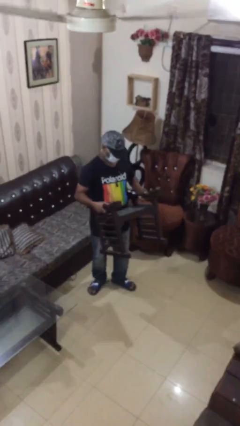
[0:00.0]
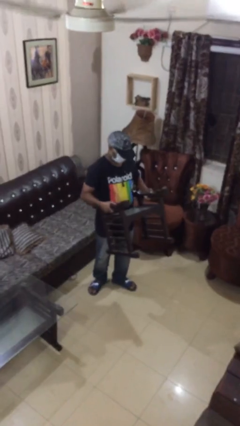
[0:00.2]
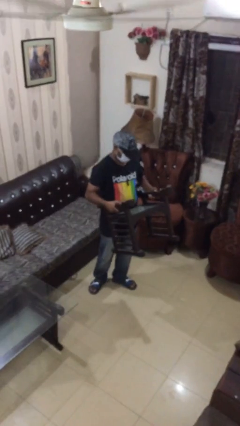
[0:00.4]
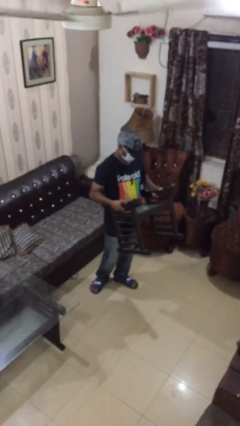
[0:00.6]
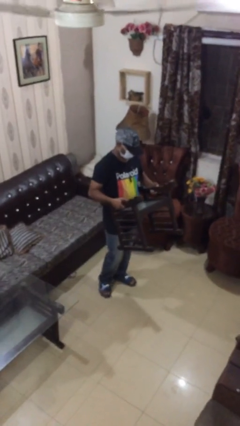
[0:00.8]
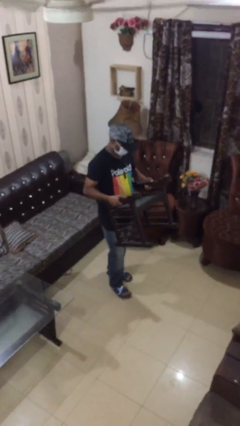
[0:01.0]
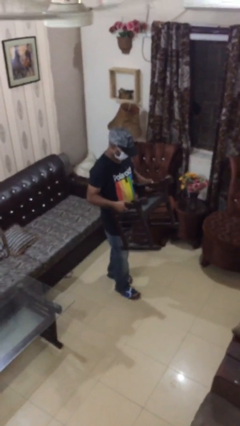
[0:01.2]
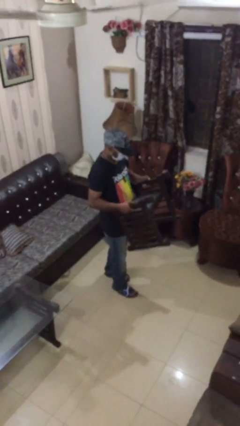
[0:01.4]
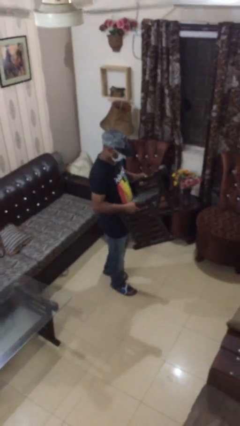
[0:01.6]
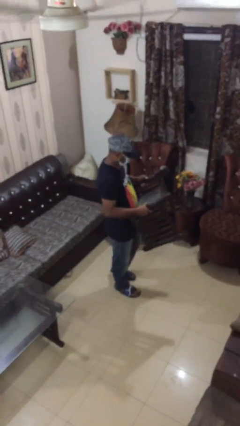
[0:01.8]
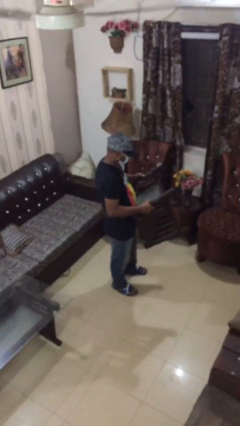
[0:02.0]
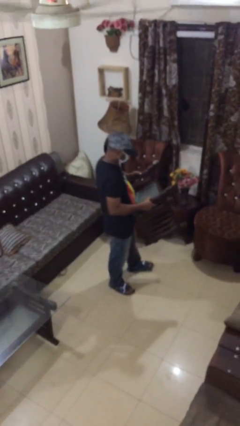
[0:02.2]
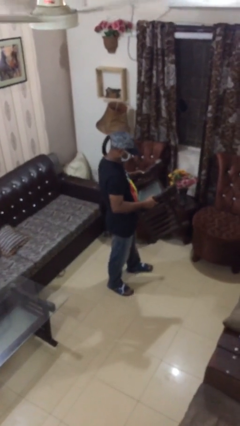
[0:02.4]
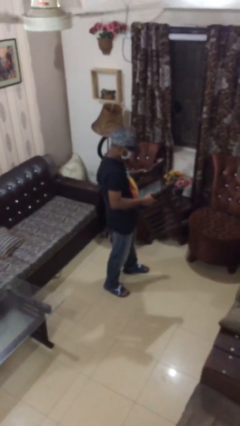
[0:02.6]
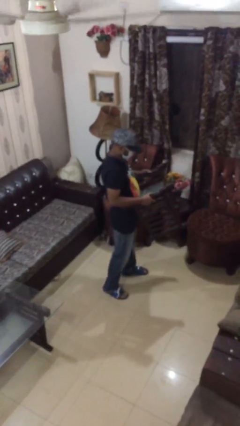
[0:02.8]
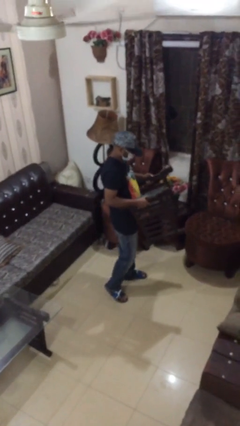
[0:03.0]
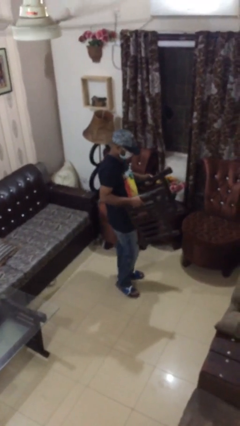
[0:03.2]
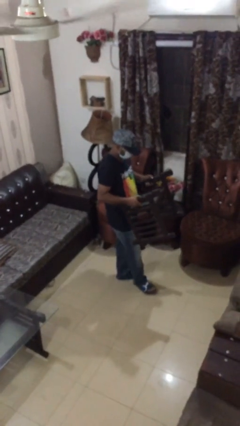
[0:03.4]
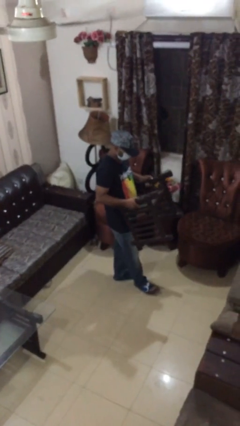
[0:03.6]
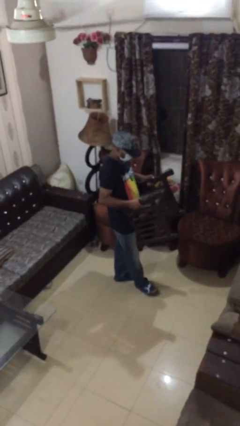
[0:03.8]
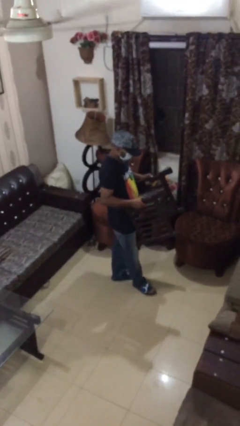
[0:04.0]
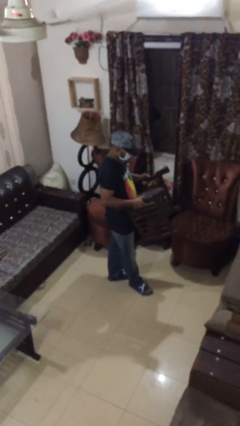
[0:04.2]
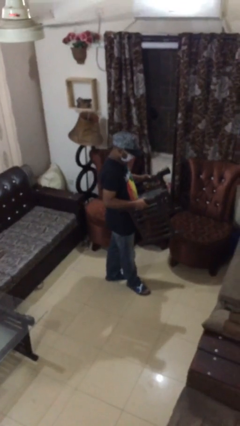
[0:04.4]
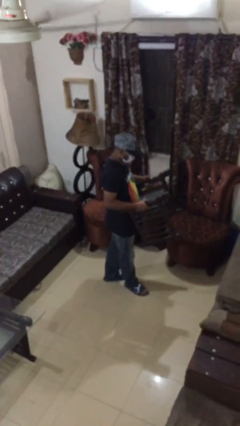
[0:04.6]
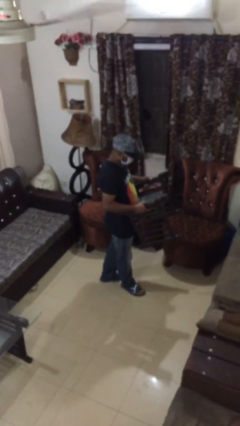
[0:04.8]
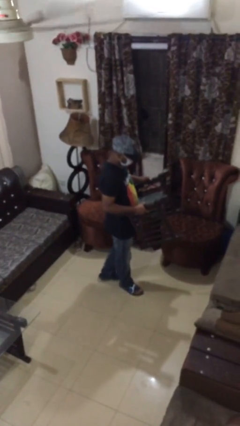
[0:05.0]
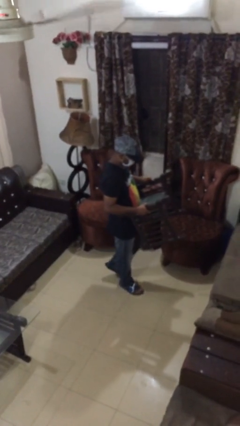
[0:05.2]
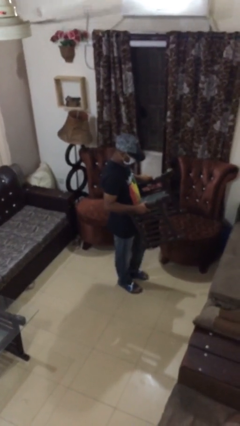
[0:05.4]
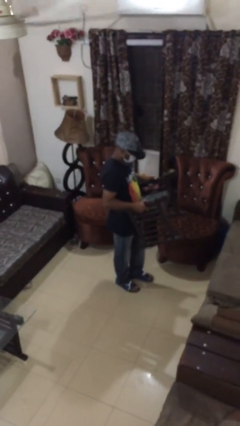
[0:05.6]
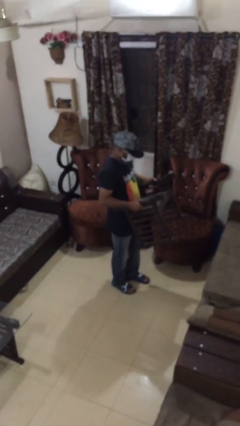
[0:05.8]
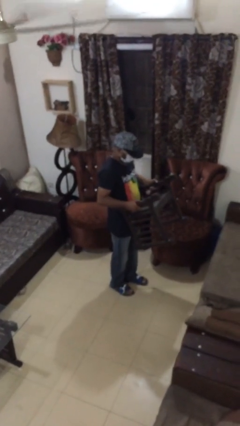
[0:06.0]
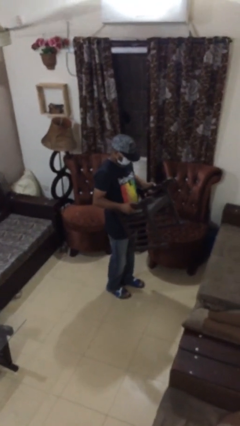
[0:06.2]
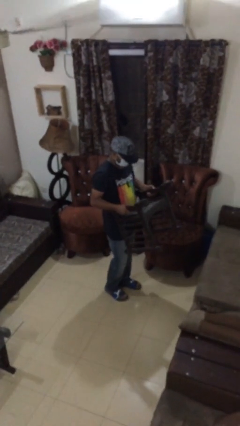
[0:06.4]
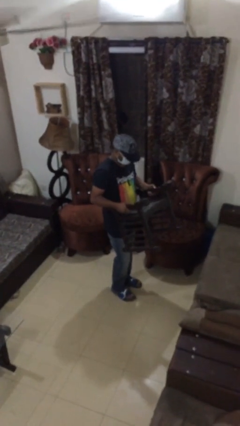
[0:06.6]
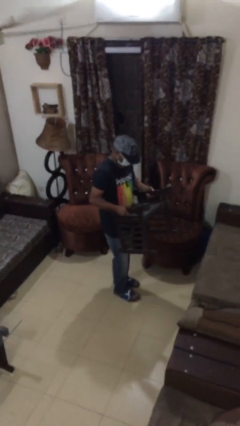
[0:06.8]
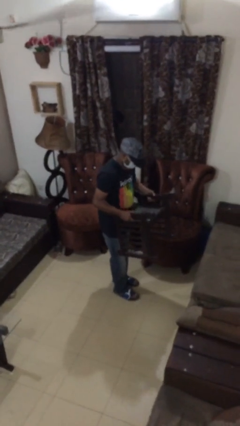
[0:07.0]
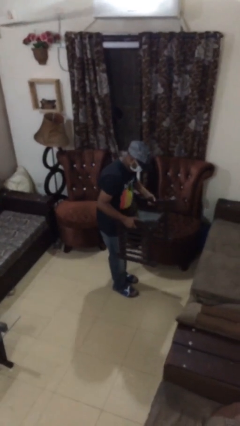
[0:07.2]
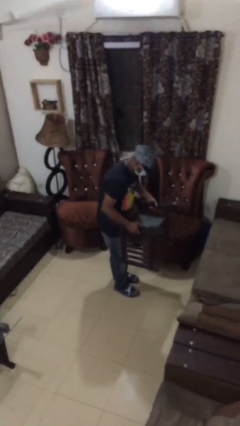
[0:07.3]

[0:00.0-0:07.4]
person carries heavy object

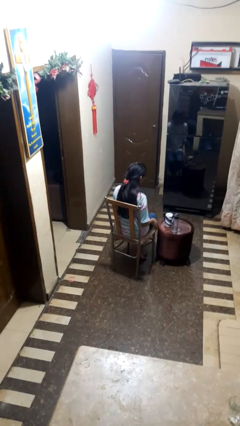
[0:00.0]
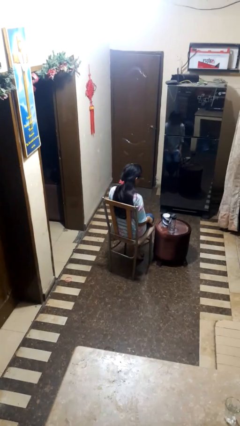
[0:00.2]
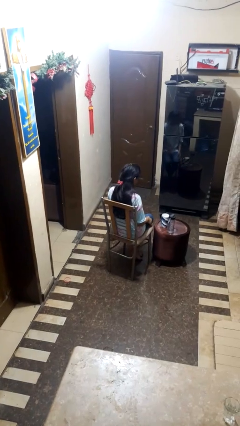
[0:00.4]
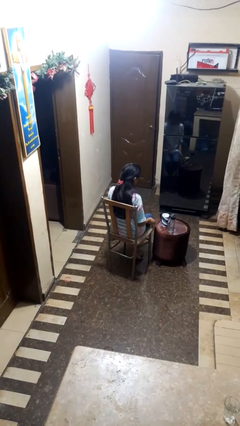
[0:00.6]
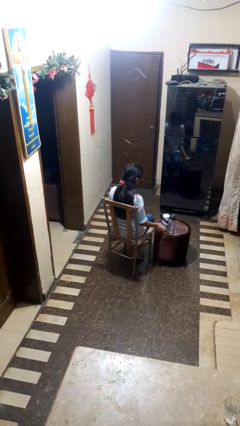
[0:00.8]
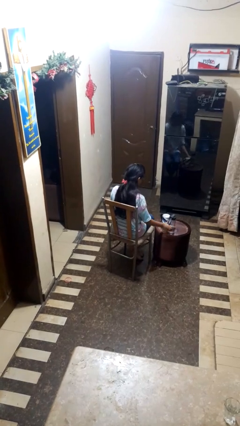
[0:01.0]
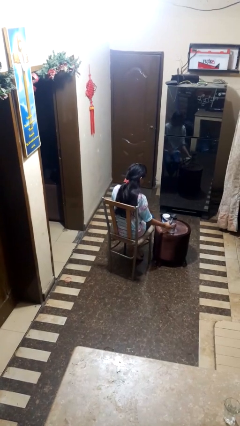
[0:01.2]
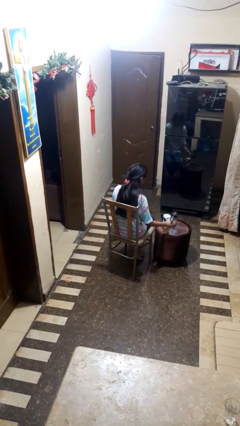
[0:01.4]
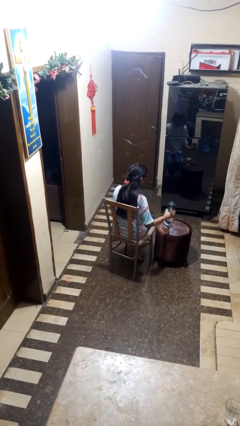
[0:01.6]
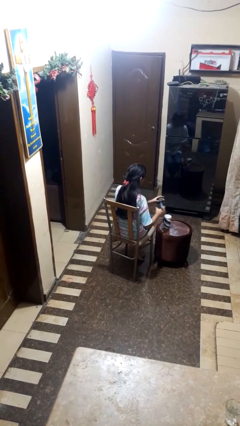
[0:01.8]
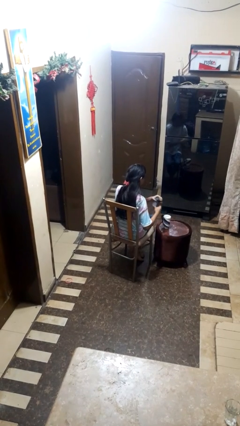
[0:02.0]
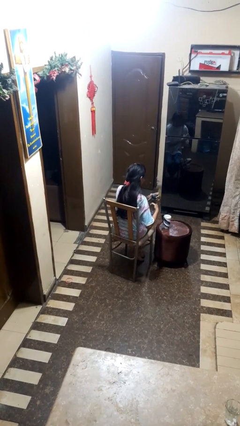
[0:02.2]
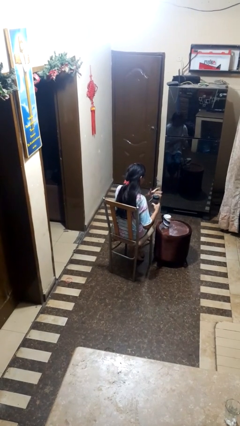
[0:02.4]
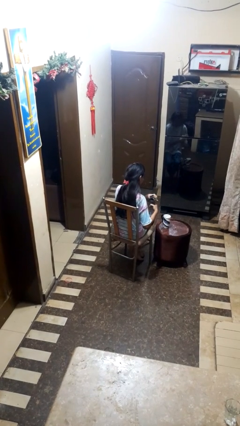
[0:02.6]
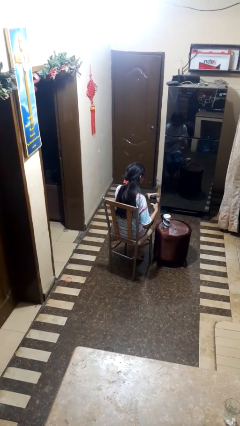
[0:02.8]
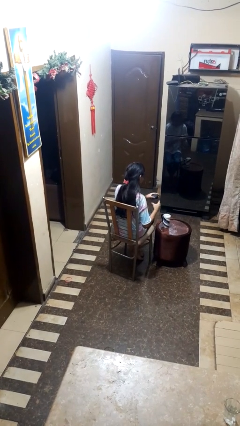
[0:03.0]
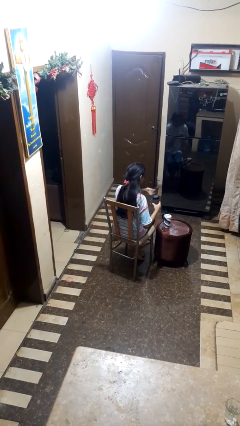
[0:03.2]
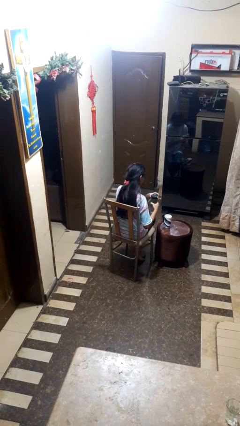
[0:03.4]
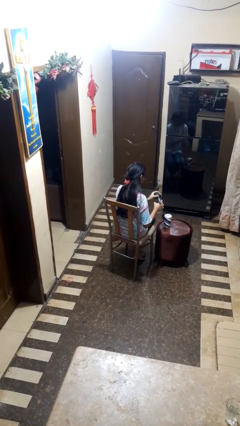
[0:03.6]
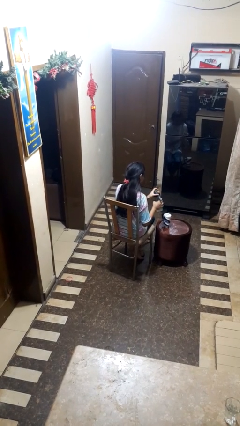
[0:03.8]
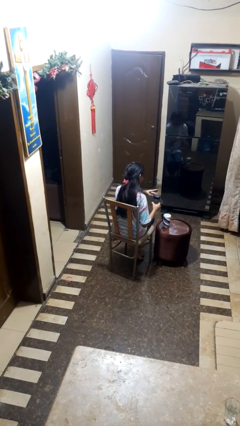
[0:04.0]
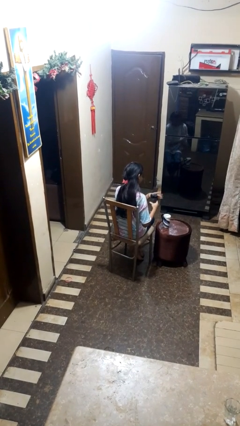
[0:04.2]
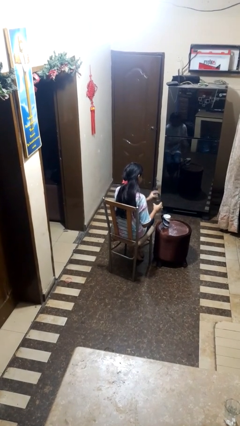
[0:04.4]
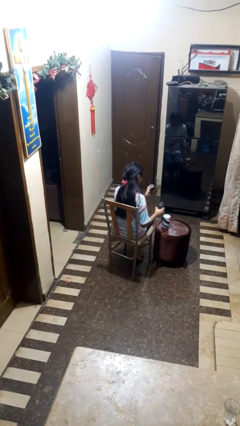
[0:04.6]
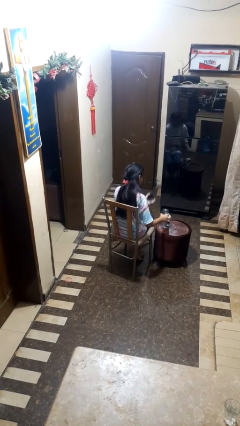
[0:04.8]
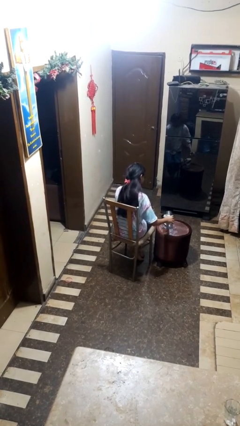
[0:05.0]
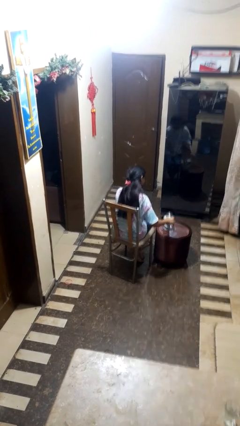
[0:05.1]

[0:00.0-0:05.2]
person unscrews lid from bottle

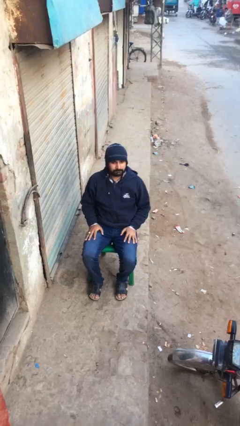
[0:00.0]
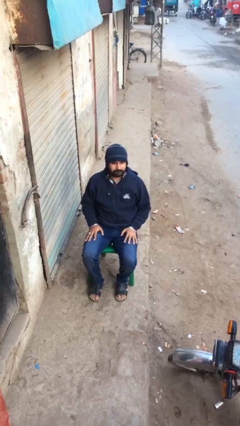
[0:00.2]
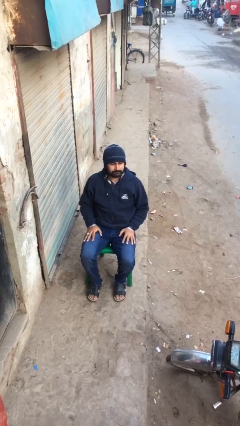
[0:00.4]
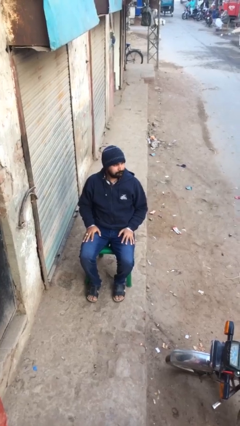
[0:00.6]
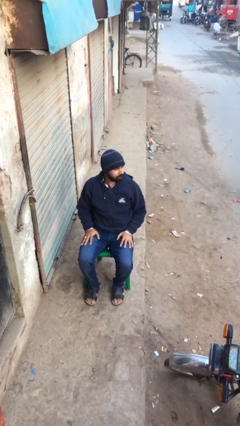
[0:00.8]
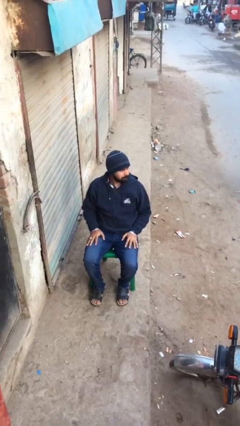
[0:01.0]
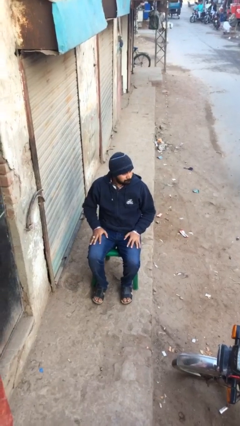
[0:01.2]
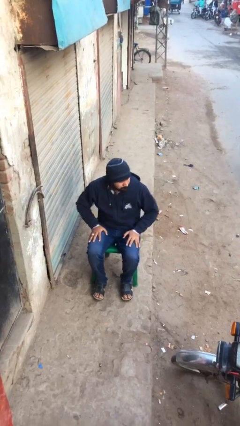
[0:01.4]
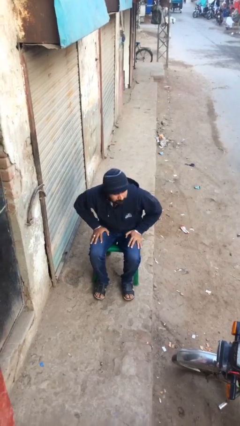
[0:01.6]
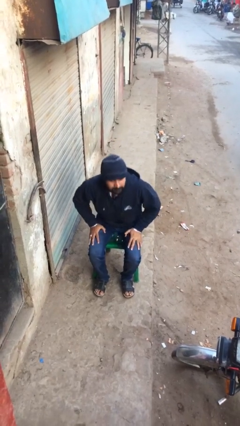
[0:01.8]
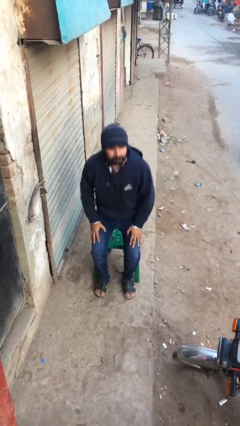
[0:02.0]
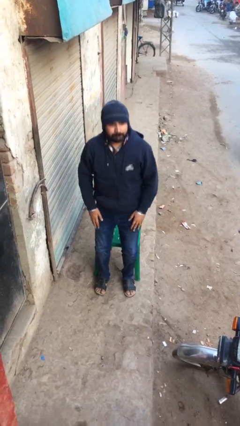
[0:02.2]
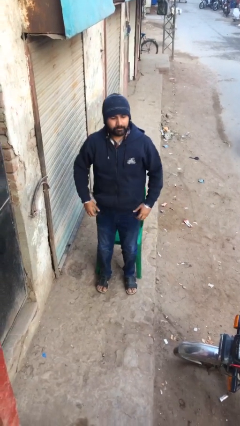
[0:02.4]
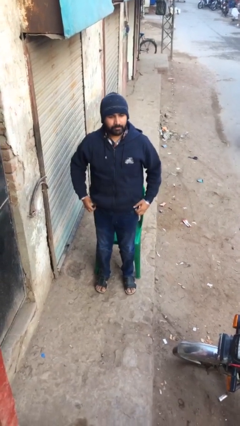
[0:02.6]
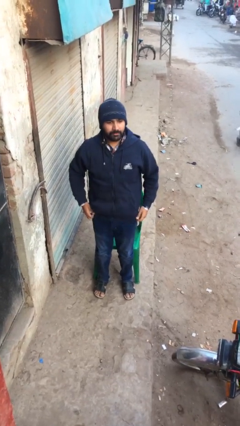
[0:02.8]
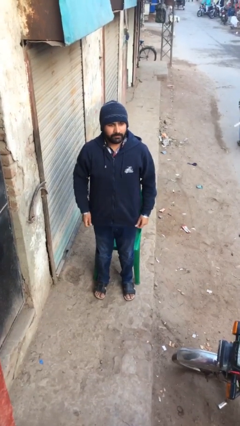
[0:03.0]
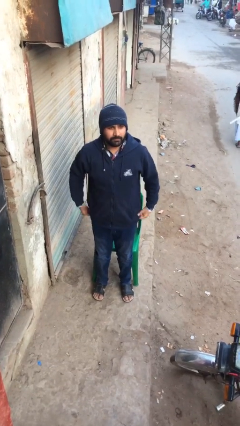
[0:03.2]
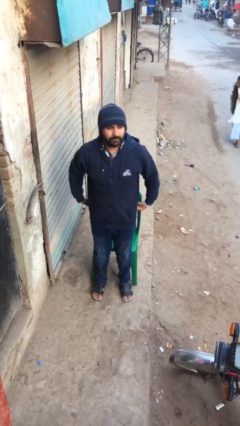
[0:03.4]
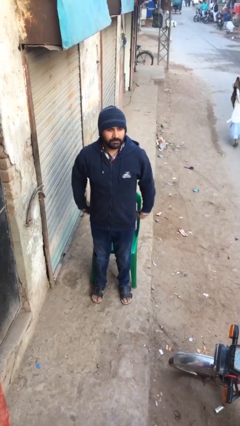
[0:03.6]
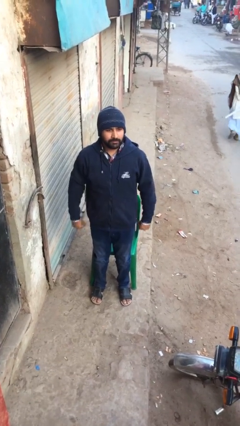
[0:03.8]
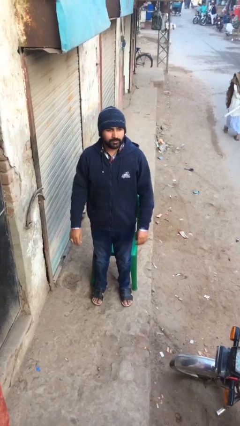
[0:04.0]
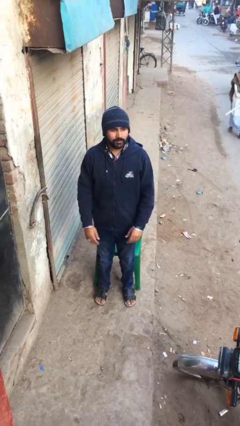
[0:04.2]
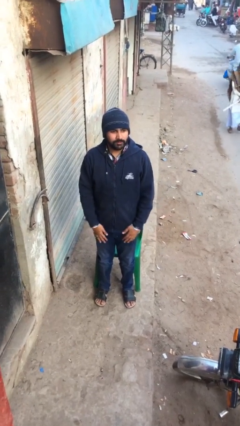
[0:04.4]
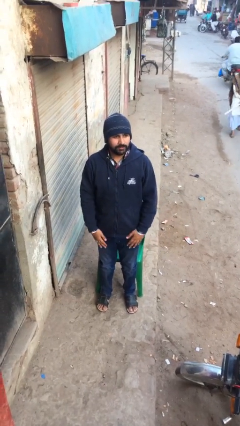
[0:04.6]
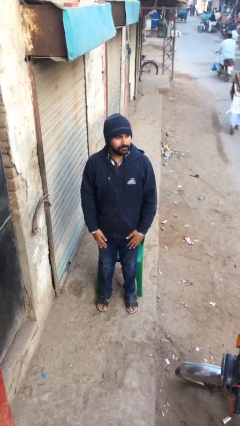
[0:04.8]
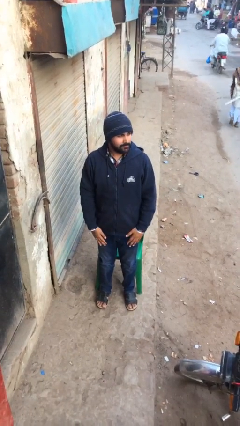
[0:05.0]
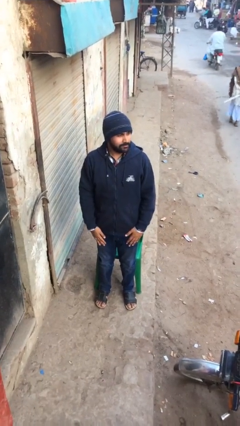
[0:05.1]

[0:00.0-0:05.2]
person stands up
